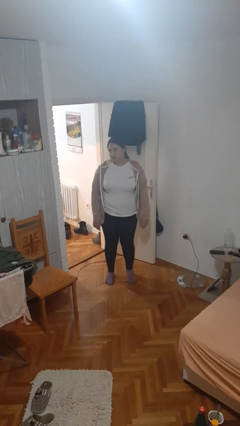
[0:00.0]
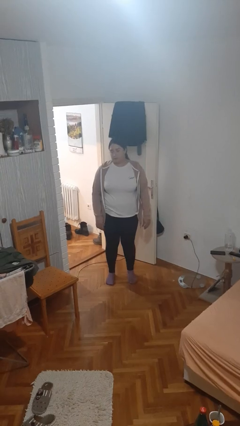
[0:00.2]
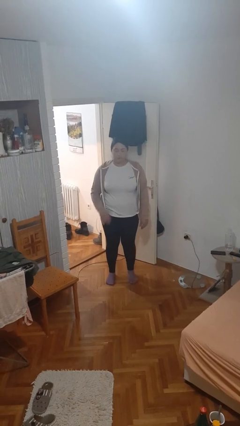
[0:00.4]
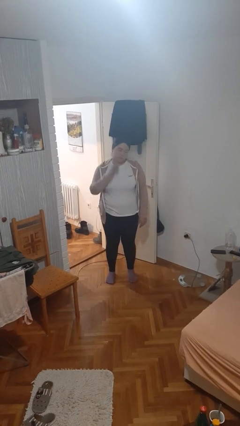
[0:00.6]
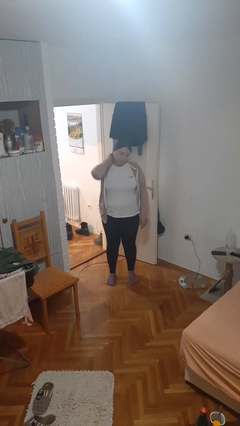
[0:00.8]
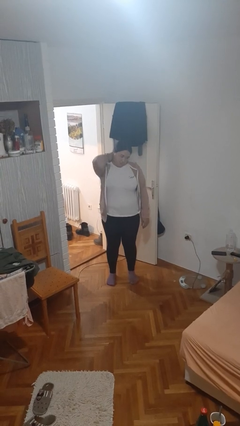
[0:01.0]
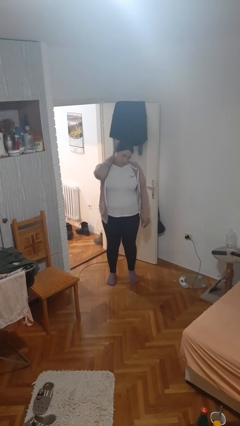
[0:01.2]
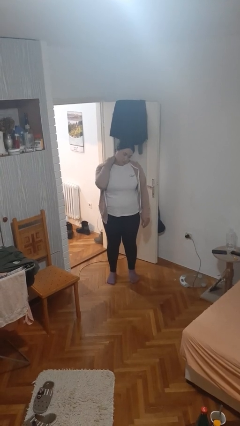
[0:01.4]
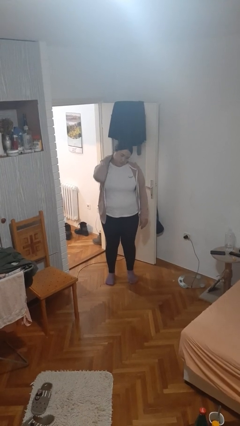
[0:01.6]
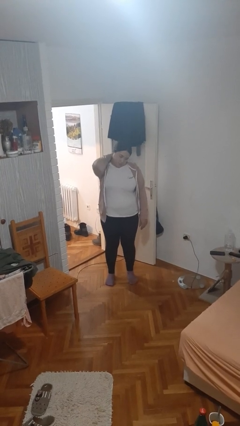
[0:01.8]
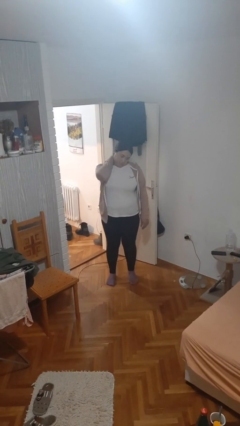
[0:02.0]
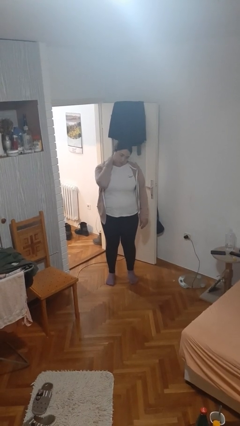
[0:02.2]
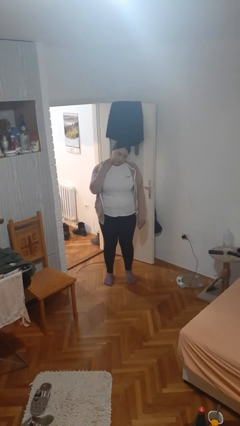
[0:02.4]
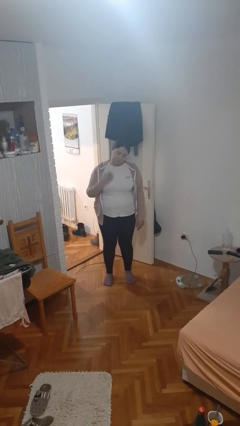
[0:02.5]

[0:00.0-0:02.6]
person rubs neck

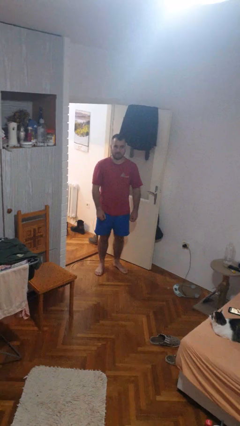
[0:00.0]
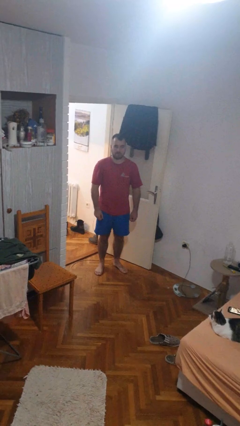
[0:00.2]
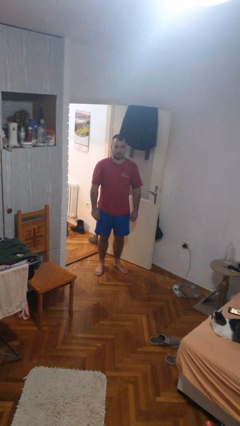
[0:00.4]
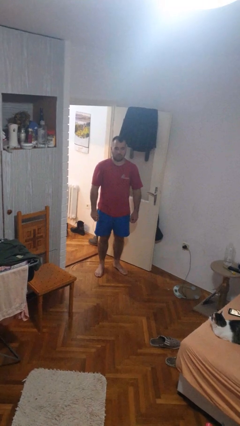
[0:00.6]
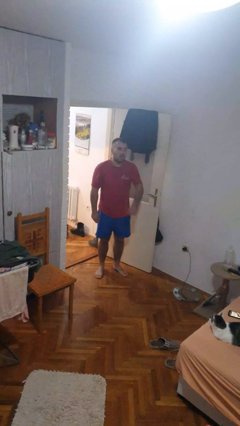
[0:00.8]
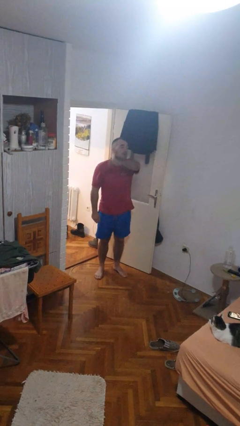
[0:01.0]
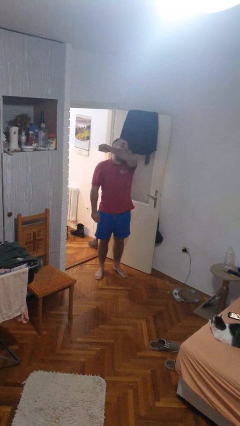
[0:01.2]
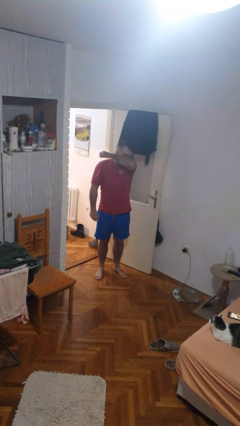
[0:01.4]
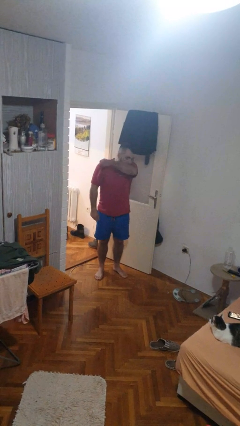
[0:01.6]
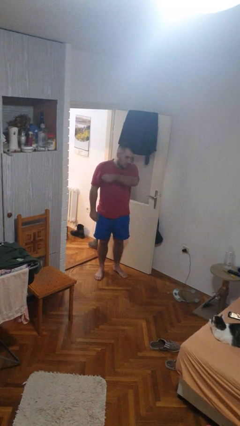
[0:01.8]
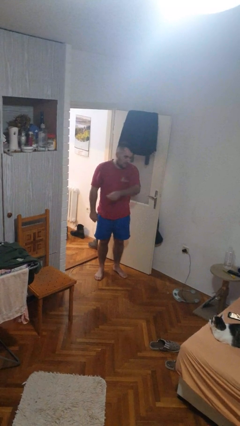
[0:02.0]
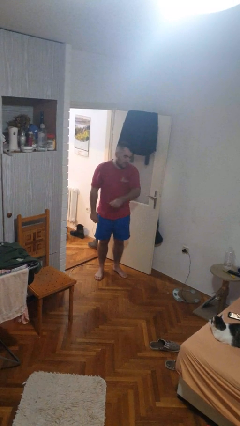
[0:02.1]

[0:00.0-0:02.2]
person sneezes into arm

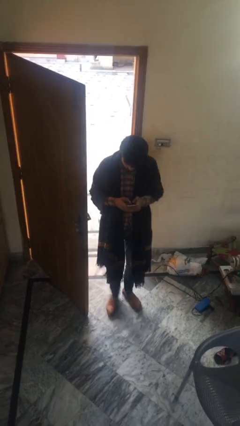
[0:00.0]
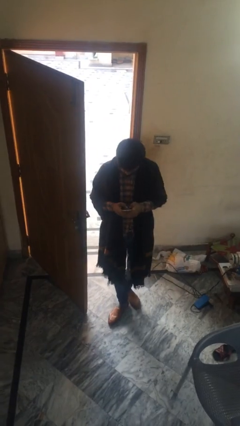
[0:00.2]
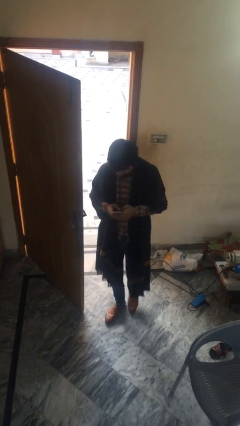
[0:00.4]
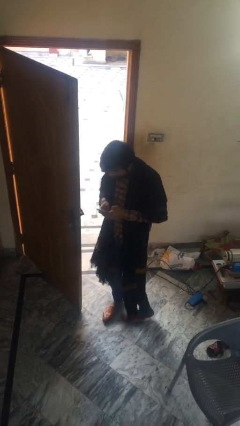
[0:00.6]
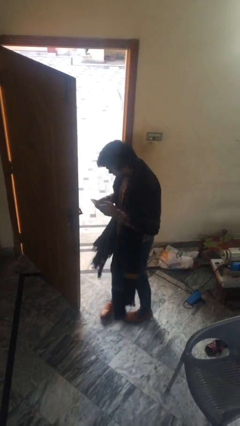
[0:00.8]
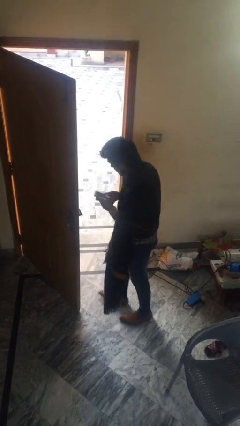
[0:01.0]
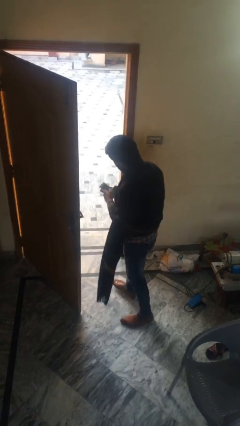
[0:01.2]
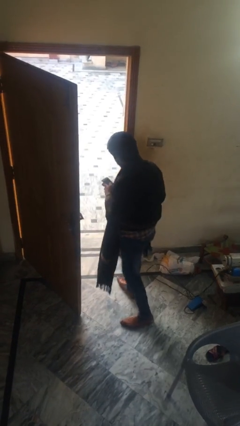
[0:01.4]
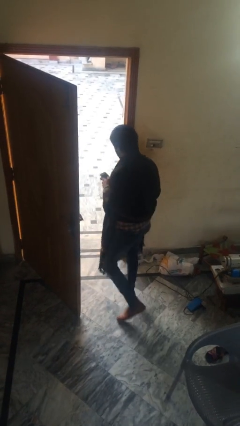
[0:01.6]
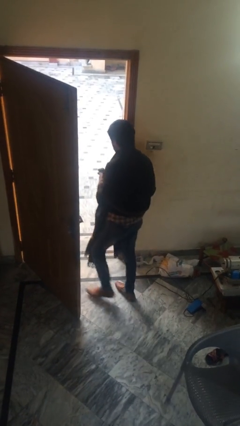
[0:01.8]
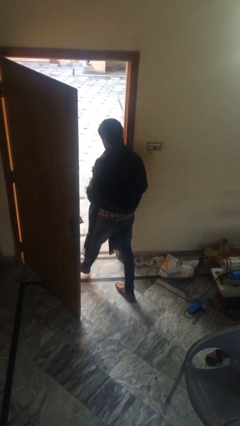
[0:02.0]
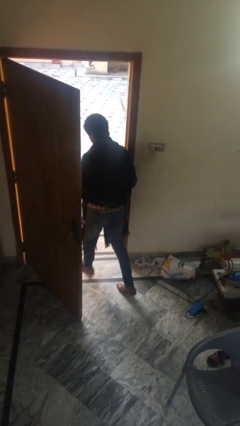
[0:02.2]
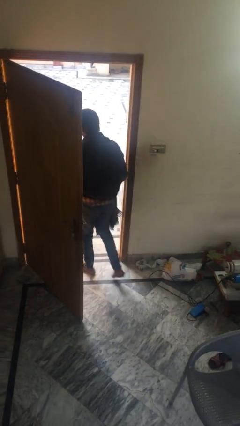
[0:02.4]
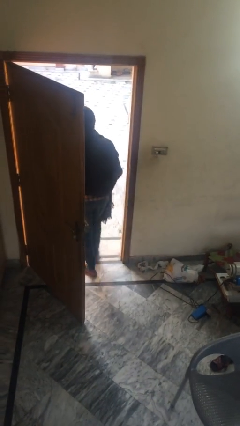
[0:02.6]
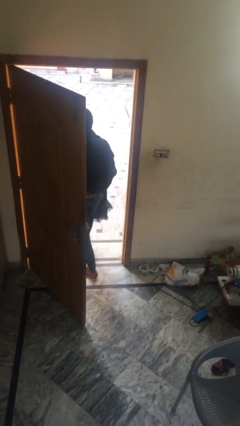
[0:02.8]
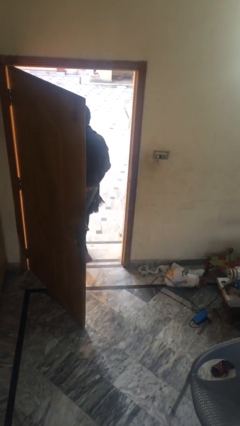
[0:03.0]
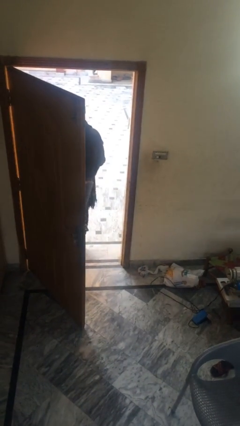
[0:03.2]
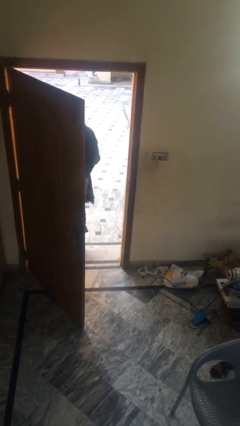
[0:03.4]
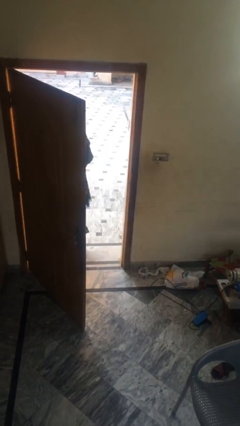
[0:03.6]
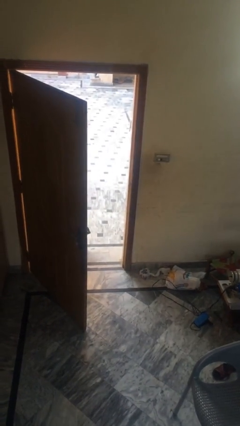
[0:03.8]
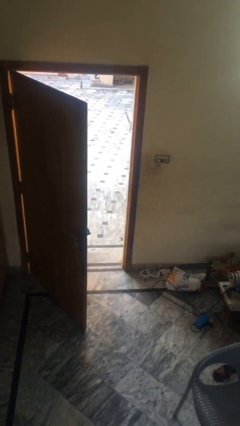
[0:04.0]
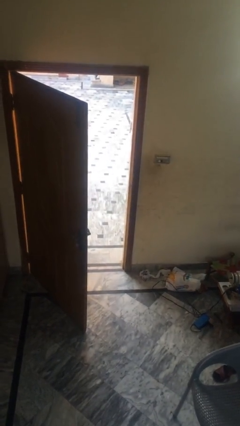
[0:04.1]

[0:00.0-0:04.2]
person exits scene through structure

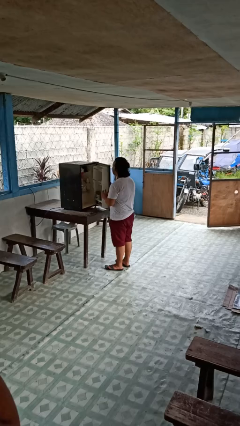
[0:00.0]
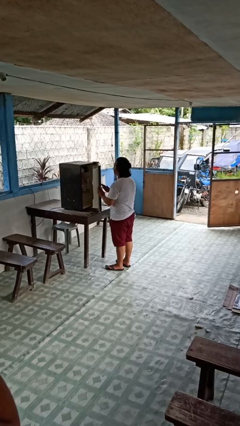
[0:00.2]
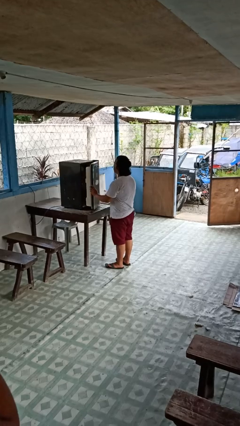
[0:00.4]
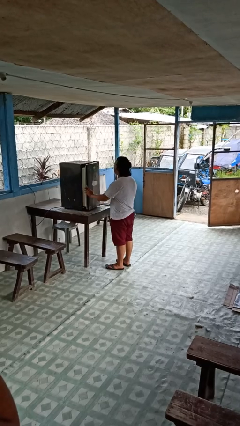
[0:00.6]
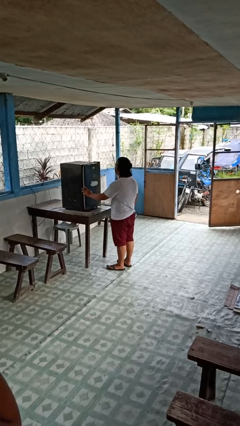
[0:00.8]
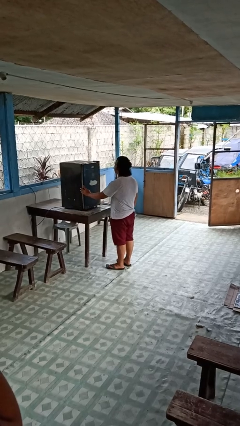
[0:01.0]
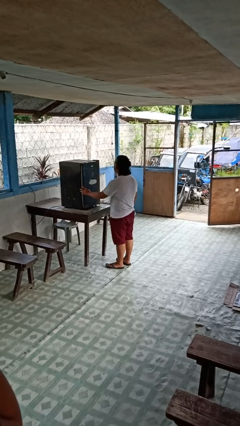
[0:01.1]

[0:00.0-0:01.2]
person closes refrigerator

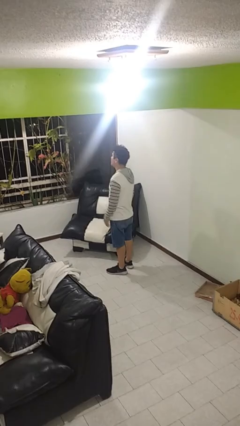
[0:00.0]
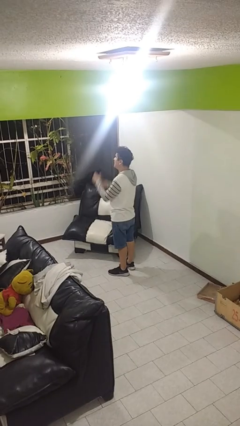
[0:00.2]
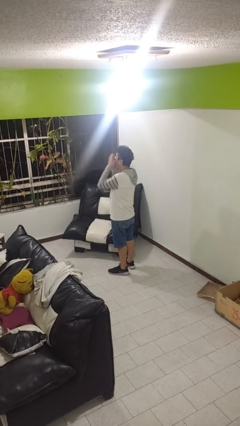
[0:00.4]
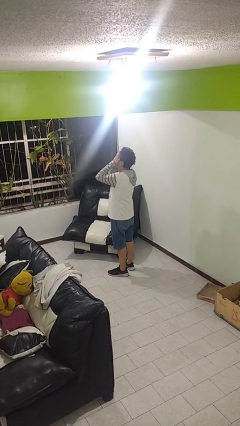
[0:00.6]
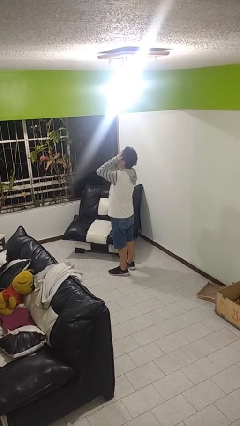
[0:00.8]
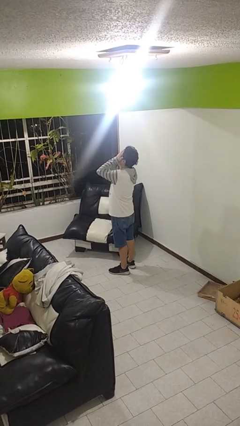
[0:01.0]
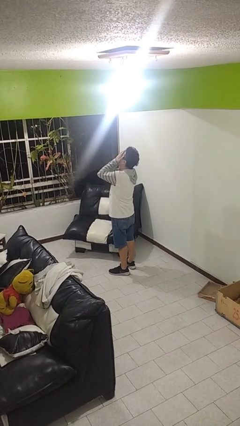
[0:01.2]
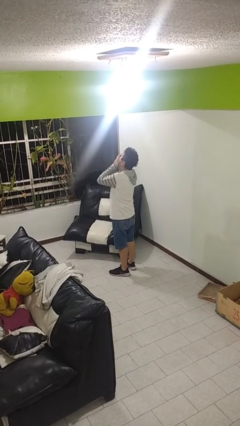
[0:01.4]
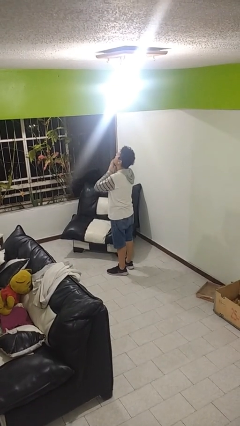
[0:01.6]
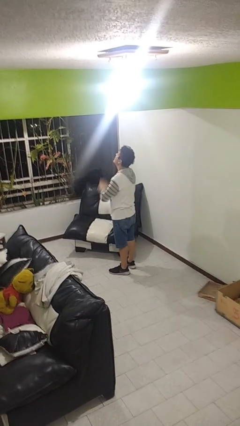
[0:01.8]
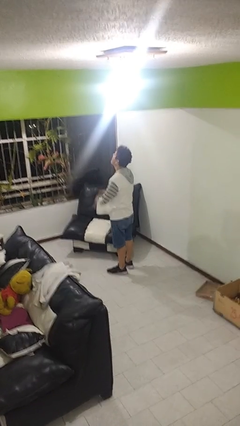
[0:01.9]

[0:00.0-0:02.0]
person covers face with hands

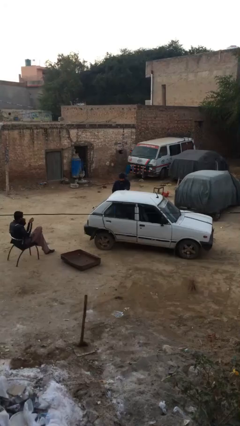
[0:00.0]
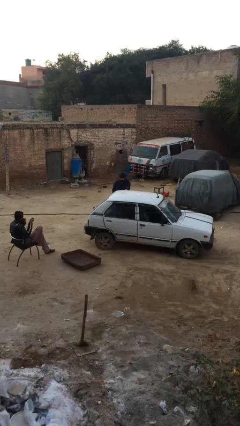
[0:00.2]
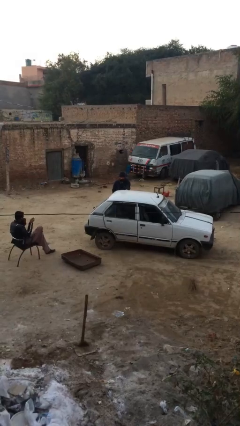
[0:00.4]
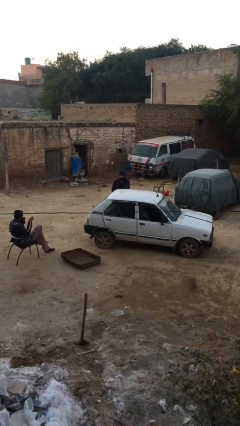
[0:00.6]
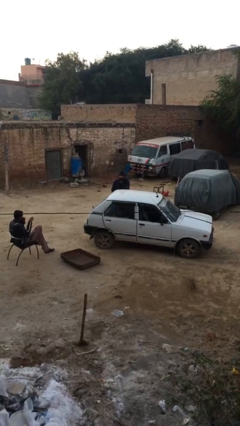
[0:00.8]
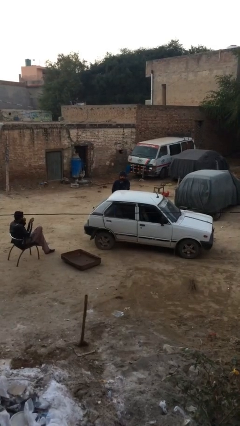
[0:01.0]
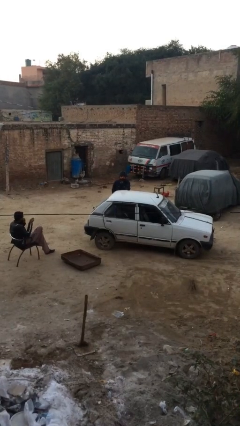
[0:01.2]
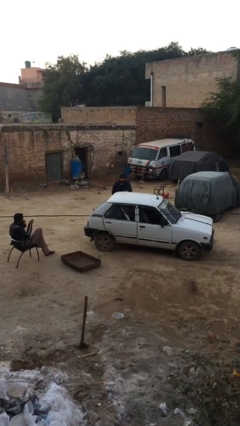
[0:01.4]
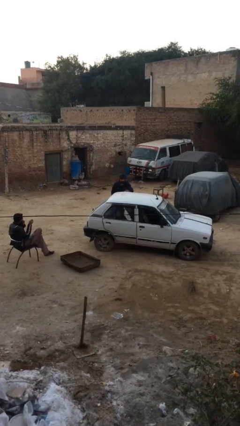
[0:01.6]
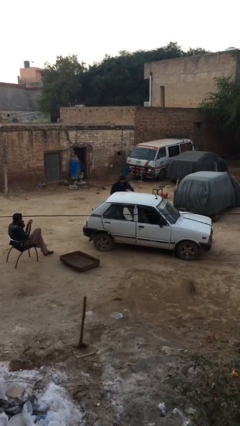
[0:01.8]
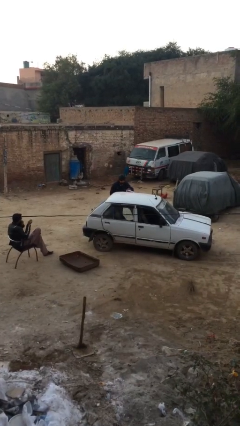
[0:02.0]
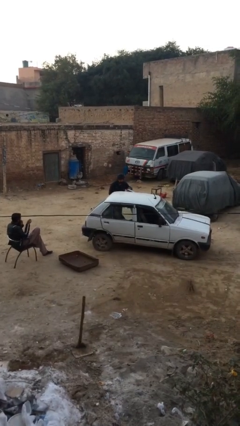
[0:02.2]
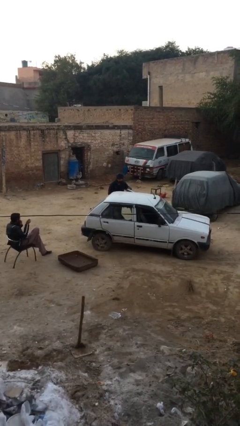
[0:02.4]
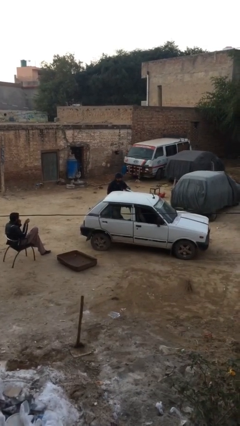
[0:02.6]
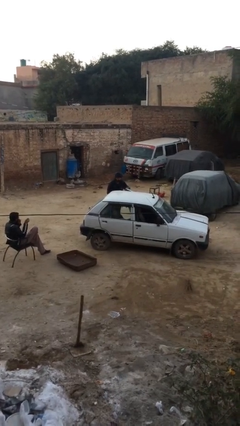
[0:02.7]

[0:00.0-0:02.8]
person opens car door

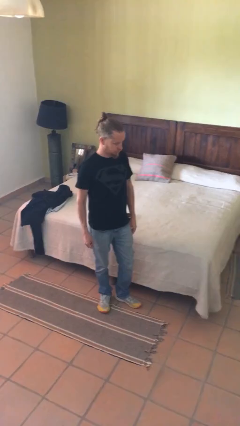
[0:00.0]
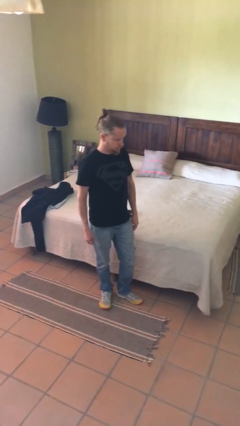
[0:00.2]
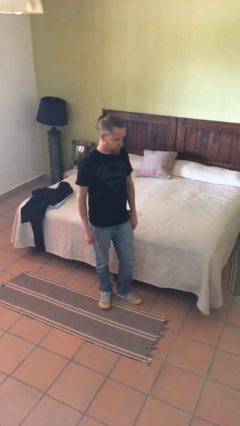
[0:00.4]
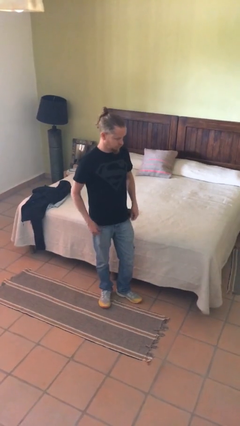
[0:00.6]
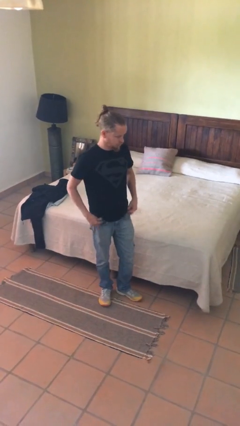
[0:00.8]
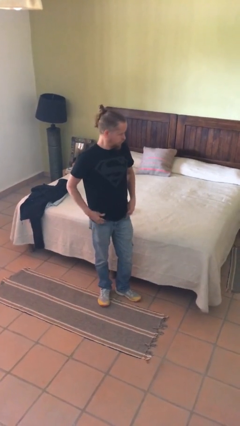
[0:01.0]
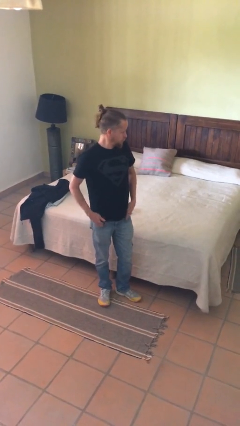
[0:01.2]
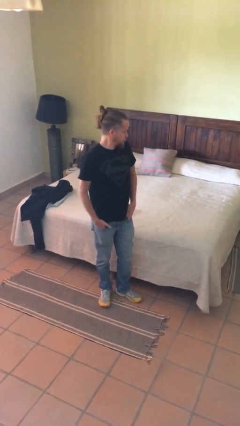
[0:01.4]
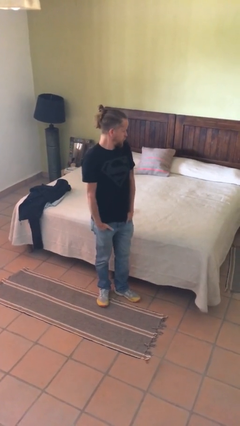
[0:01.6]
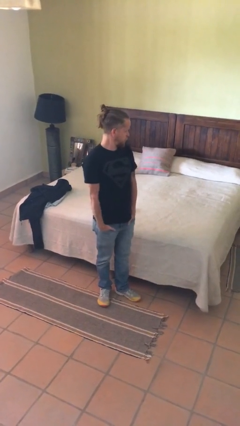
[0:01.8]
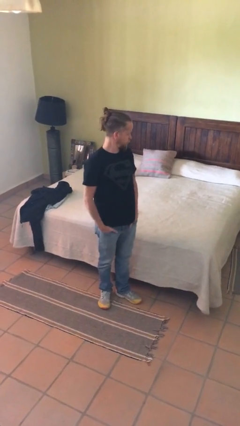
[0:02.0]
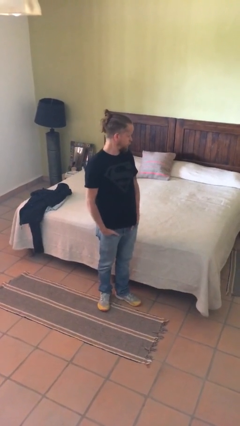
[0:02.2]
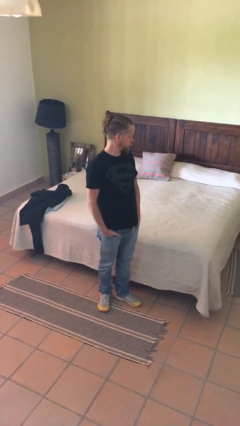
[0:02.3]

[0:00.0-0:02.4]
person puts hands in back pockets
